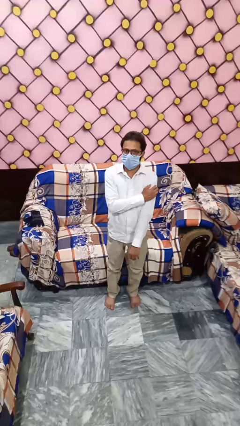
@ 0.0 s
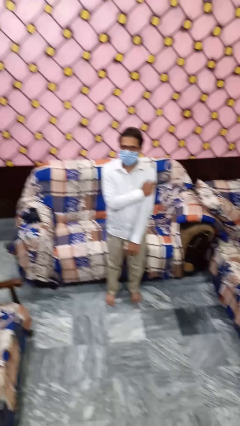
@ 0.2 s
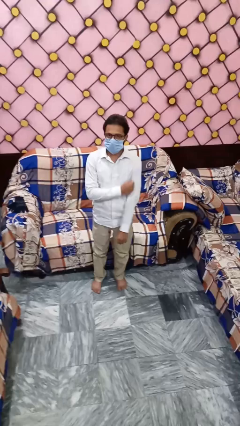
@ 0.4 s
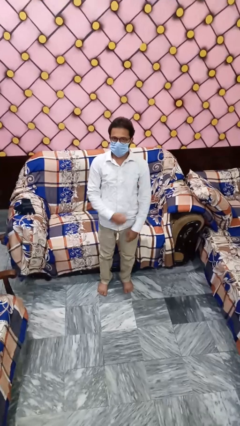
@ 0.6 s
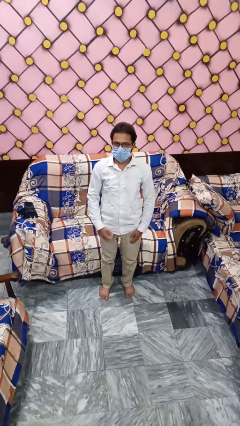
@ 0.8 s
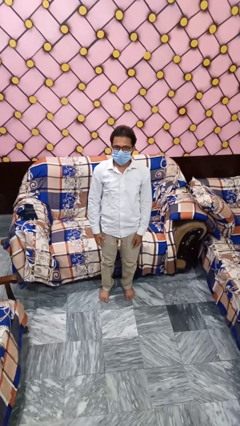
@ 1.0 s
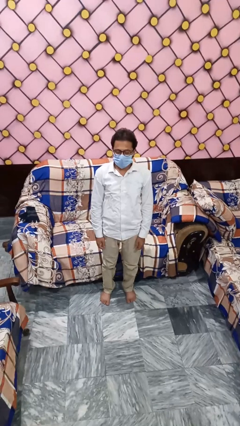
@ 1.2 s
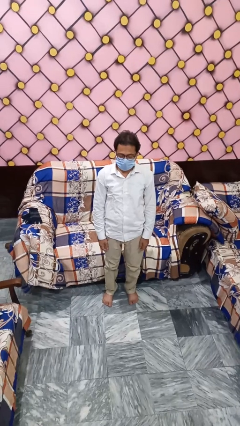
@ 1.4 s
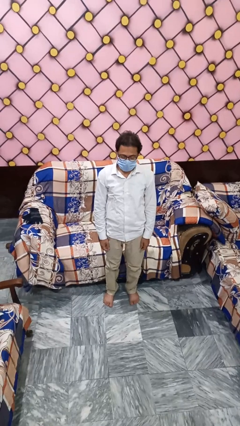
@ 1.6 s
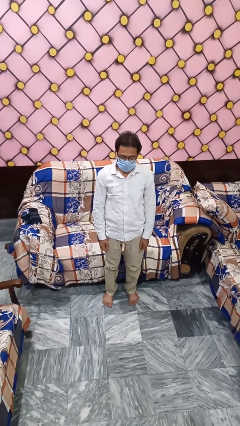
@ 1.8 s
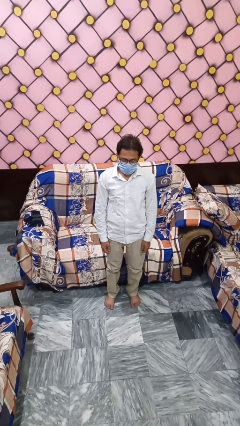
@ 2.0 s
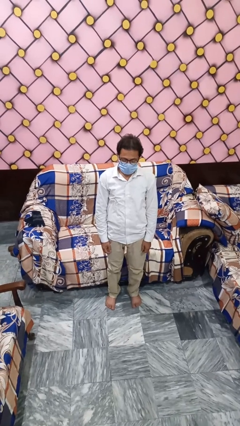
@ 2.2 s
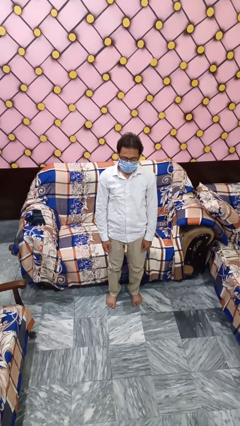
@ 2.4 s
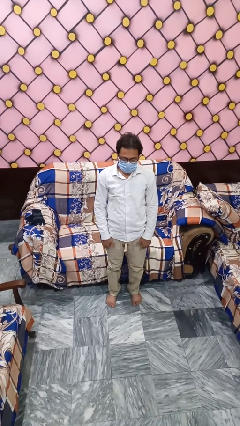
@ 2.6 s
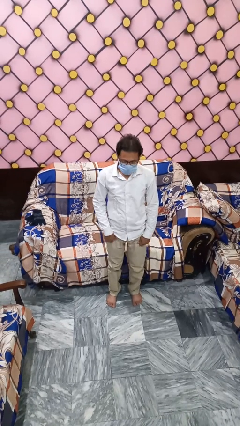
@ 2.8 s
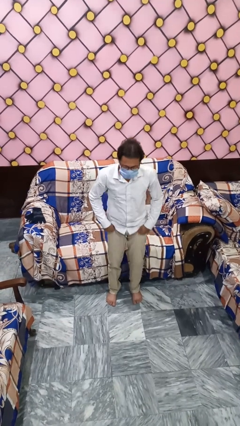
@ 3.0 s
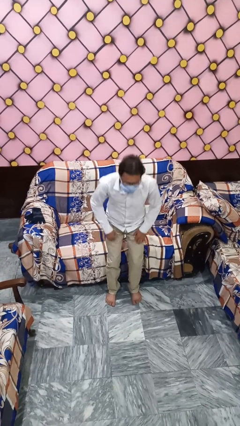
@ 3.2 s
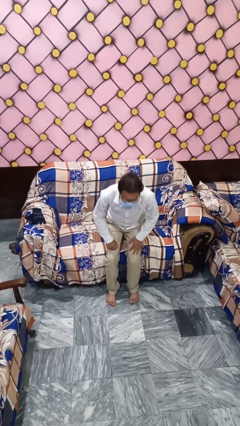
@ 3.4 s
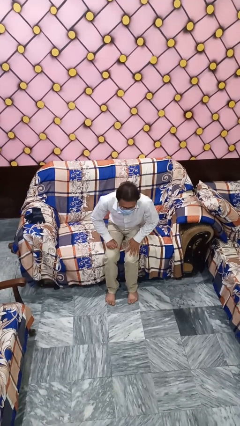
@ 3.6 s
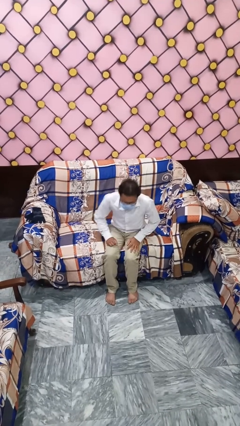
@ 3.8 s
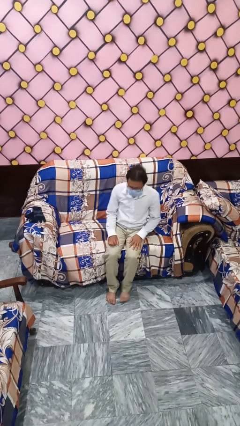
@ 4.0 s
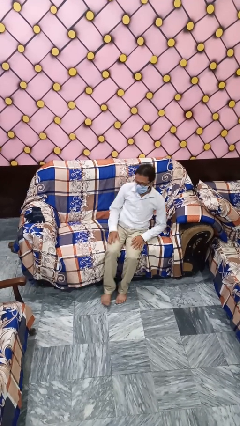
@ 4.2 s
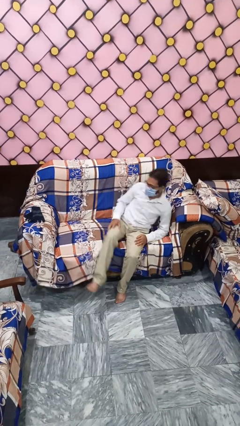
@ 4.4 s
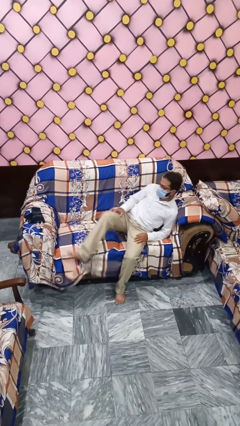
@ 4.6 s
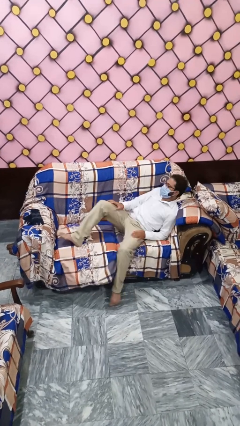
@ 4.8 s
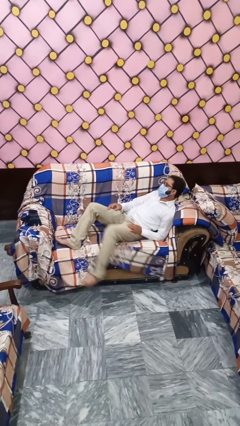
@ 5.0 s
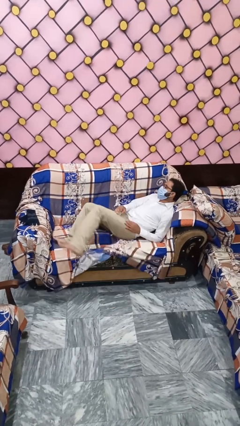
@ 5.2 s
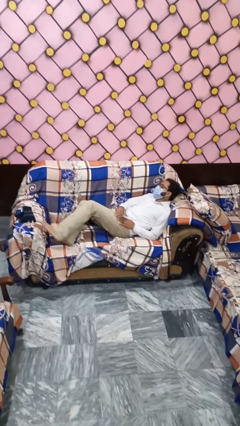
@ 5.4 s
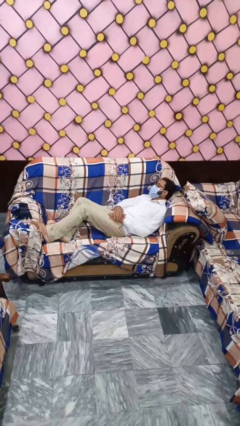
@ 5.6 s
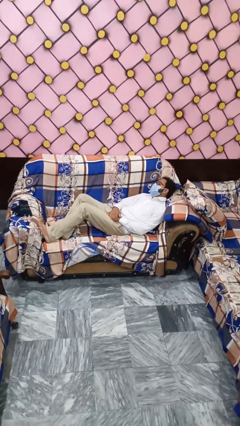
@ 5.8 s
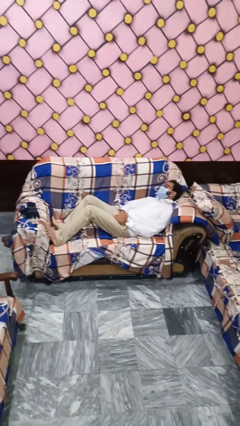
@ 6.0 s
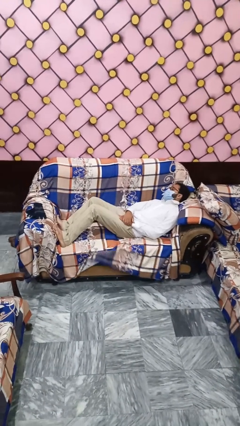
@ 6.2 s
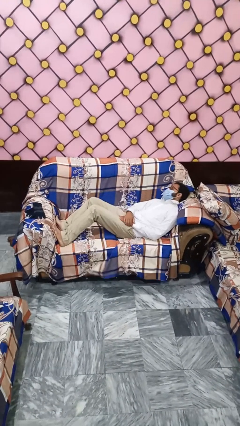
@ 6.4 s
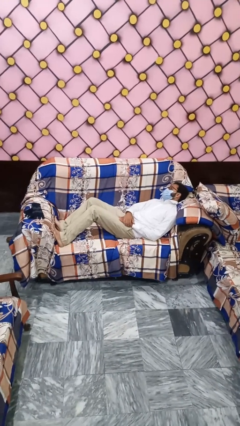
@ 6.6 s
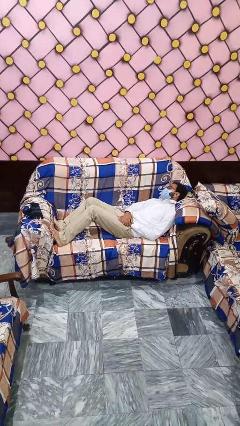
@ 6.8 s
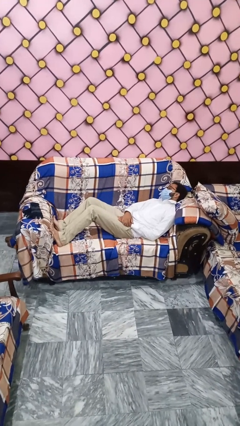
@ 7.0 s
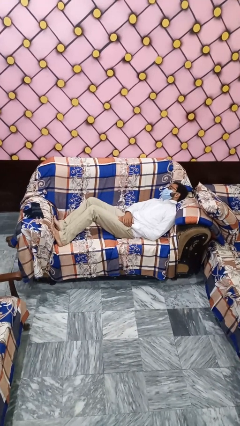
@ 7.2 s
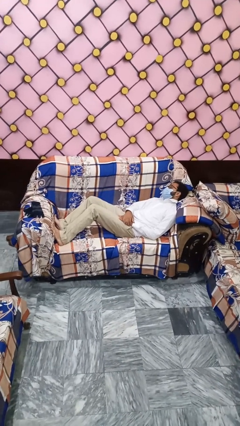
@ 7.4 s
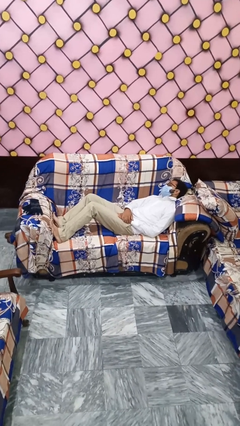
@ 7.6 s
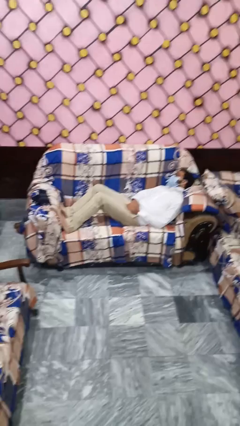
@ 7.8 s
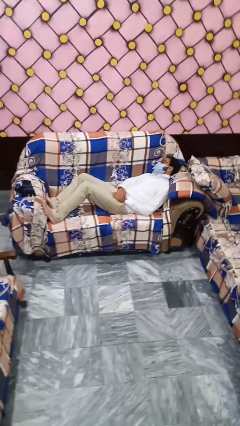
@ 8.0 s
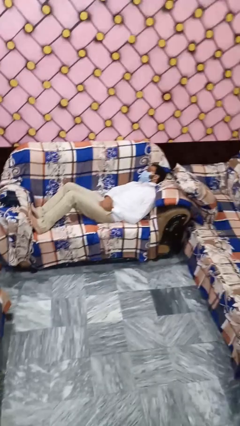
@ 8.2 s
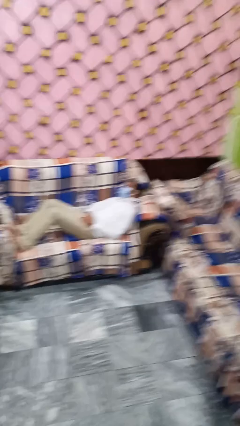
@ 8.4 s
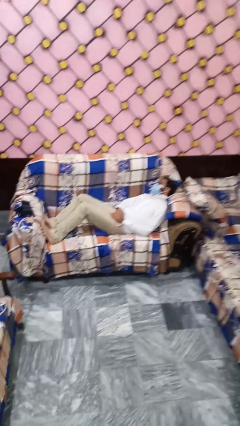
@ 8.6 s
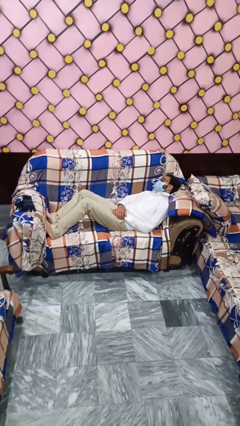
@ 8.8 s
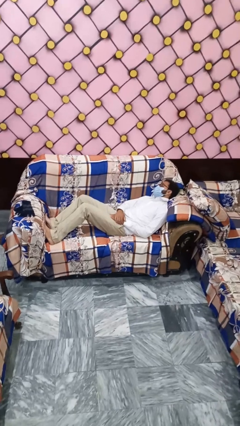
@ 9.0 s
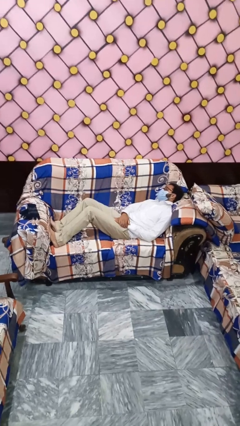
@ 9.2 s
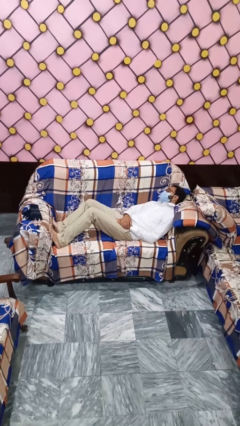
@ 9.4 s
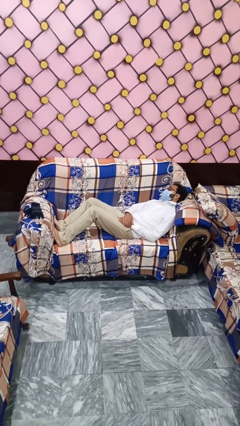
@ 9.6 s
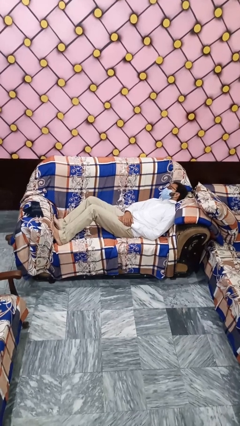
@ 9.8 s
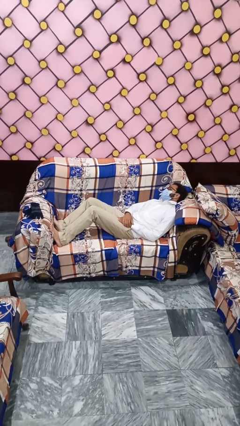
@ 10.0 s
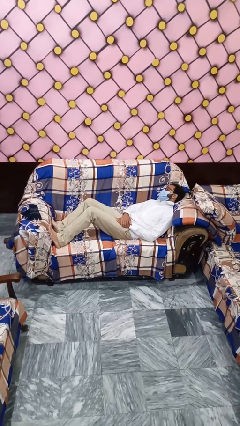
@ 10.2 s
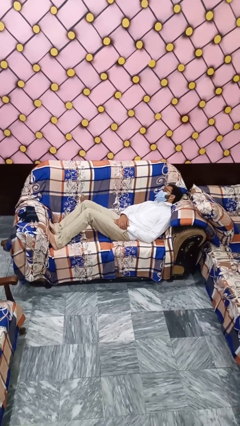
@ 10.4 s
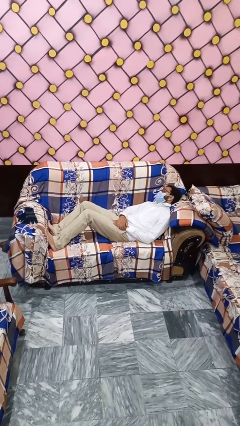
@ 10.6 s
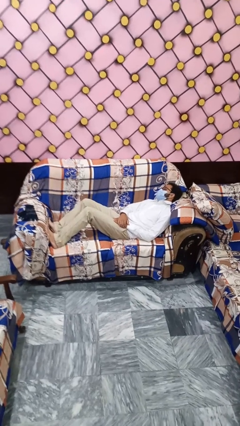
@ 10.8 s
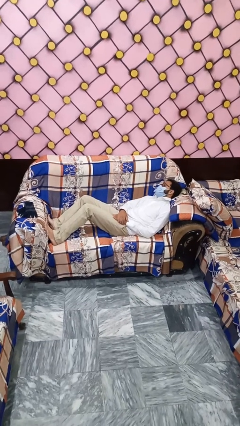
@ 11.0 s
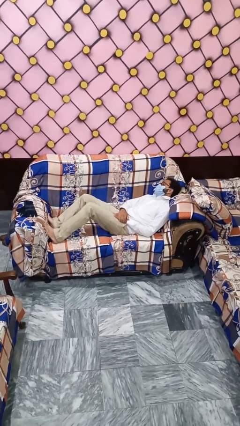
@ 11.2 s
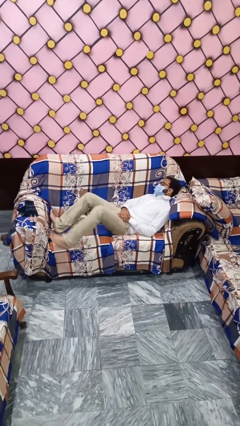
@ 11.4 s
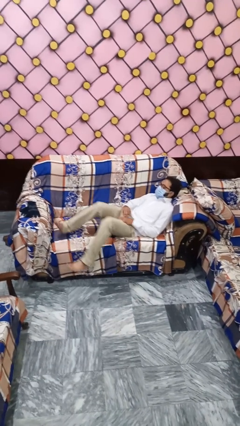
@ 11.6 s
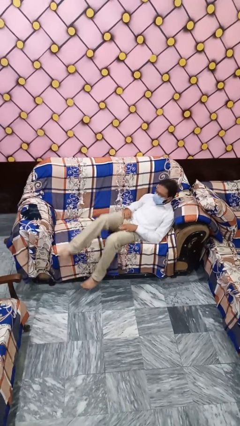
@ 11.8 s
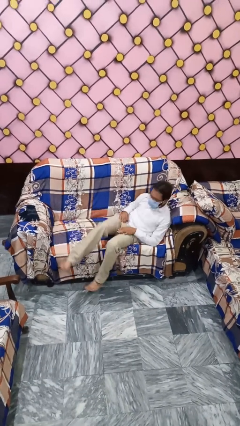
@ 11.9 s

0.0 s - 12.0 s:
person lies down on couch

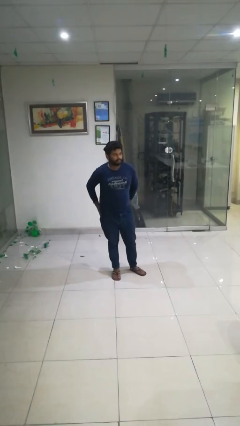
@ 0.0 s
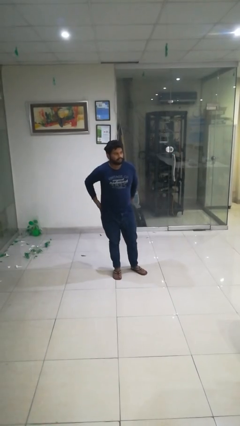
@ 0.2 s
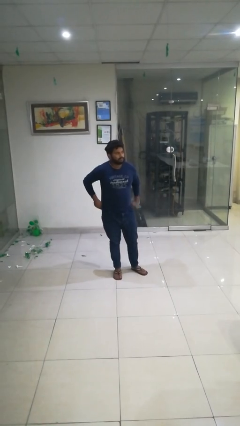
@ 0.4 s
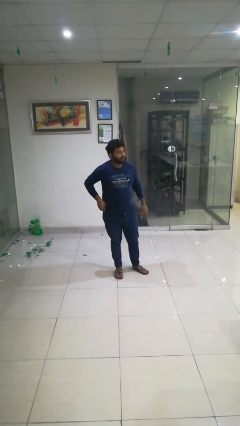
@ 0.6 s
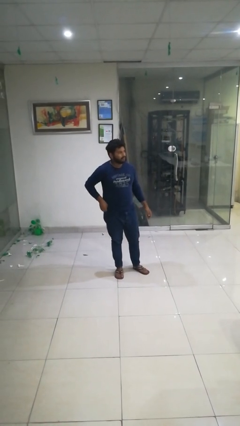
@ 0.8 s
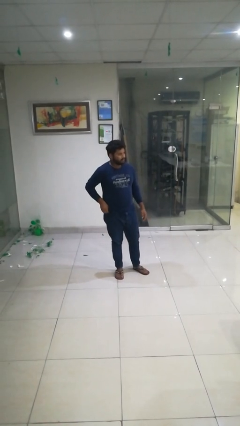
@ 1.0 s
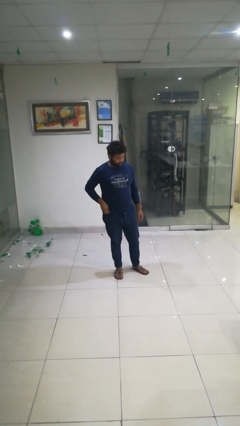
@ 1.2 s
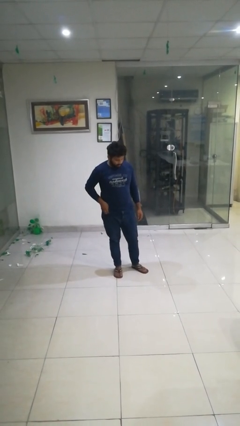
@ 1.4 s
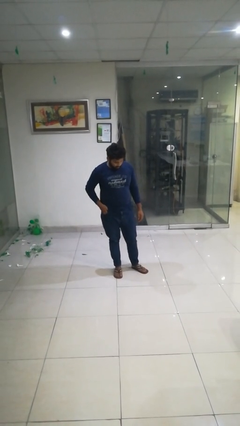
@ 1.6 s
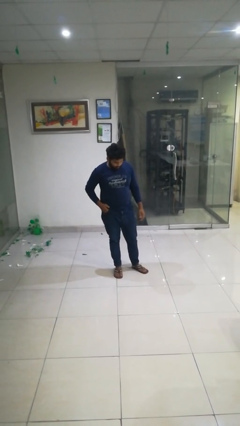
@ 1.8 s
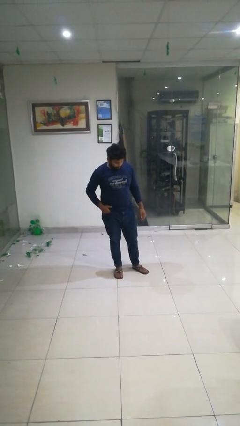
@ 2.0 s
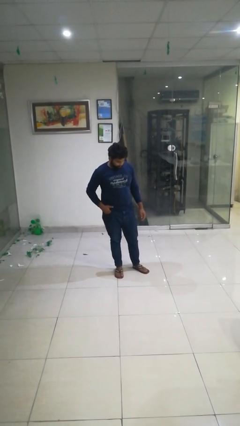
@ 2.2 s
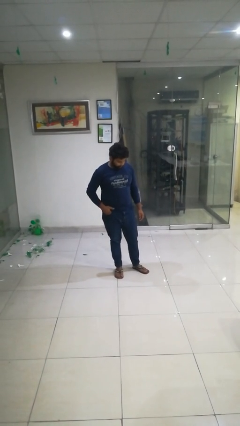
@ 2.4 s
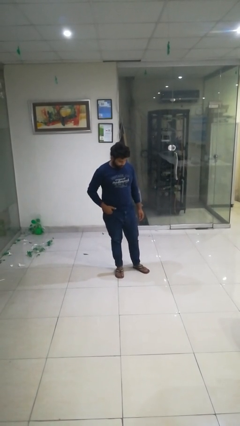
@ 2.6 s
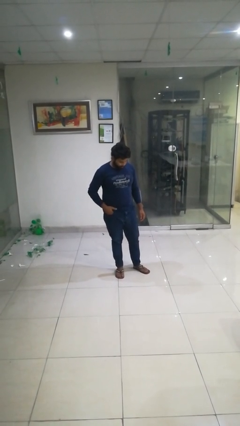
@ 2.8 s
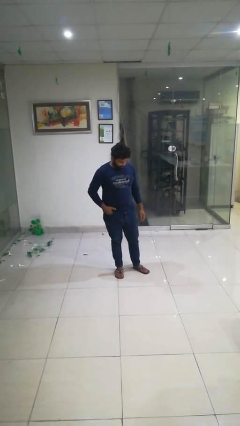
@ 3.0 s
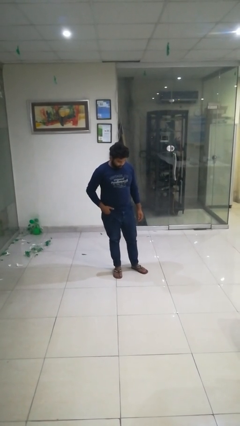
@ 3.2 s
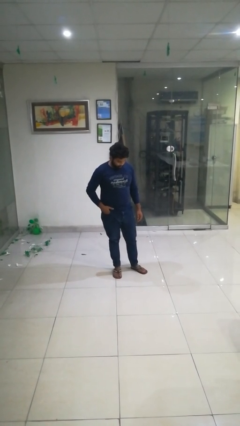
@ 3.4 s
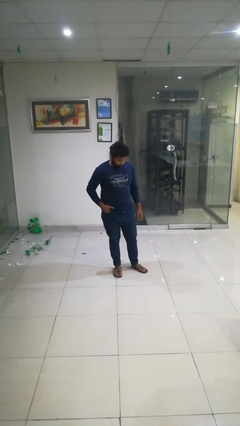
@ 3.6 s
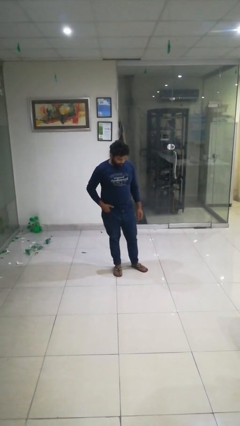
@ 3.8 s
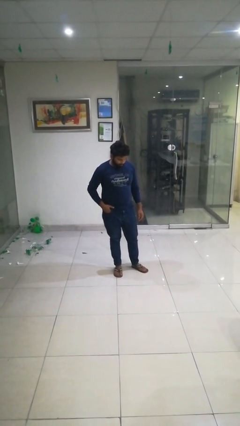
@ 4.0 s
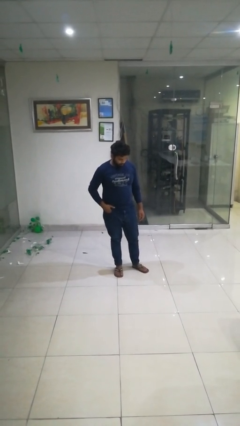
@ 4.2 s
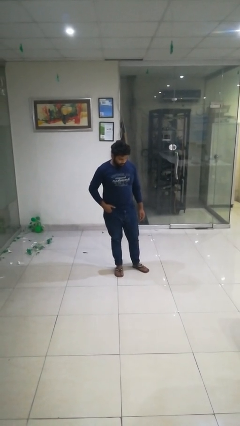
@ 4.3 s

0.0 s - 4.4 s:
person puts hands in back pockets

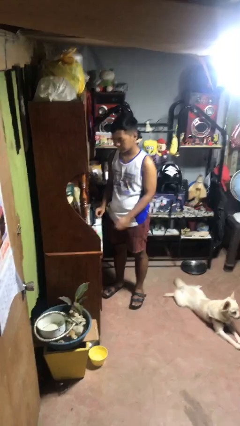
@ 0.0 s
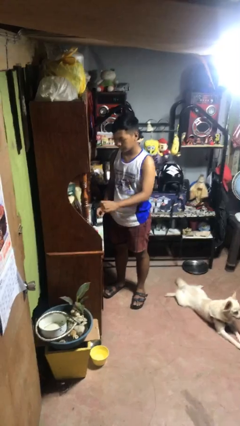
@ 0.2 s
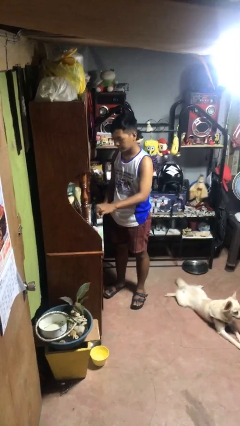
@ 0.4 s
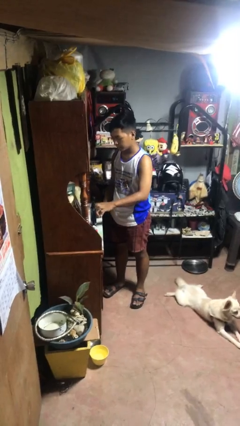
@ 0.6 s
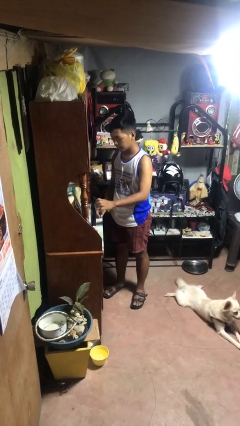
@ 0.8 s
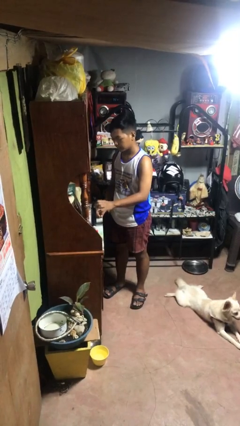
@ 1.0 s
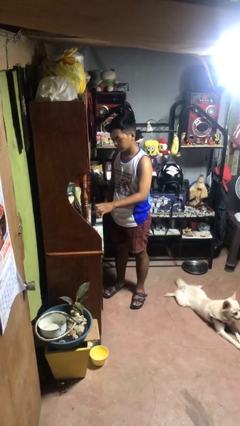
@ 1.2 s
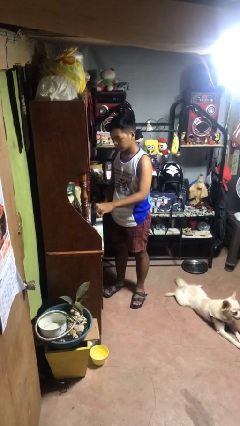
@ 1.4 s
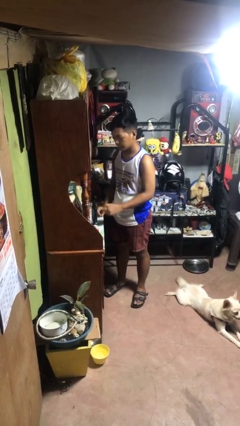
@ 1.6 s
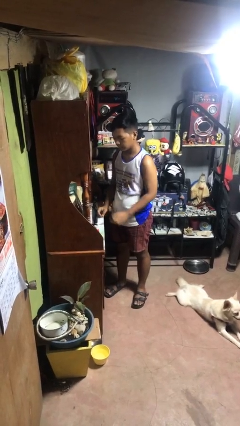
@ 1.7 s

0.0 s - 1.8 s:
person taps object with finger
